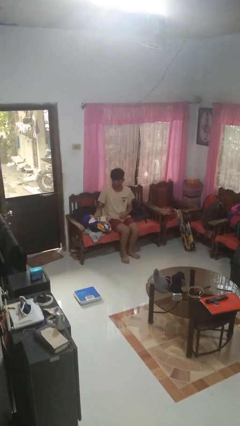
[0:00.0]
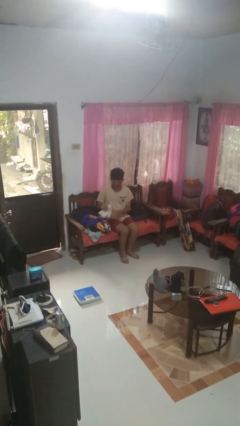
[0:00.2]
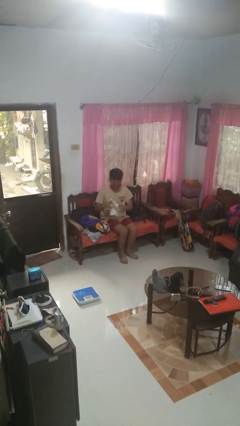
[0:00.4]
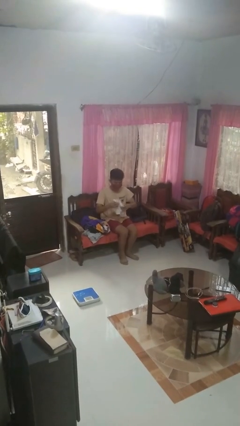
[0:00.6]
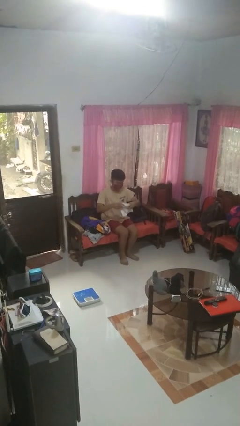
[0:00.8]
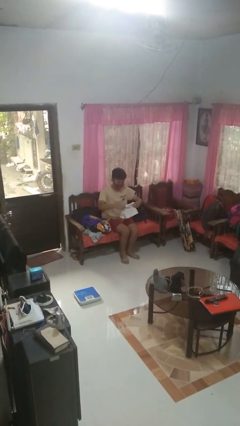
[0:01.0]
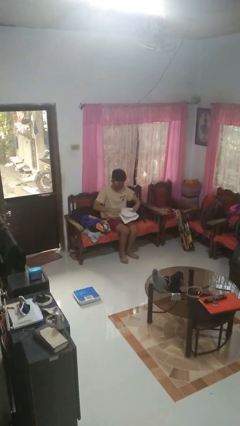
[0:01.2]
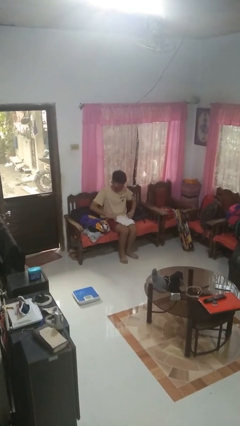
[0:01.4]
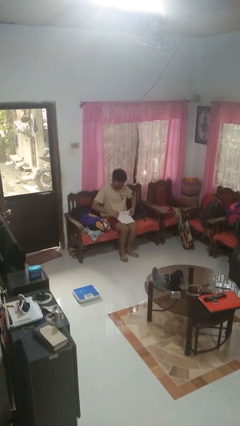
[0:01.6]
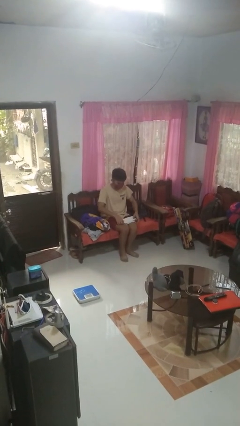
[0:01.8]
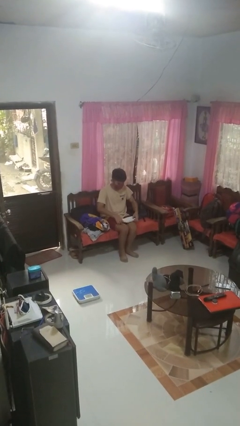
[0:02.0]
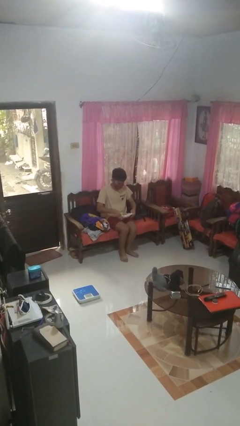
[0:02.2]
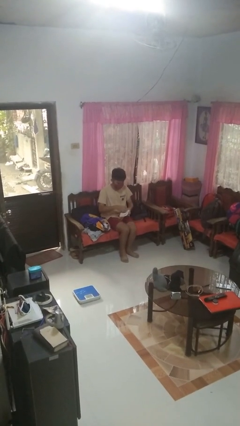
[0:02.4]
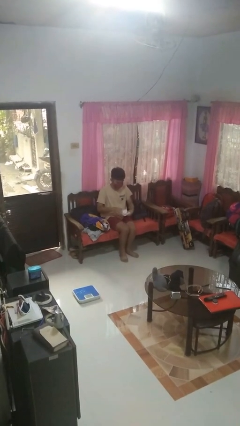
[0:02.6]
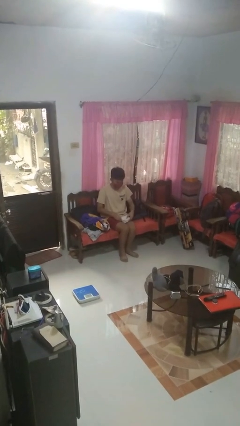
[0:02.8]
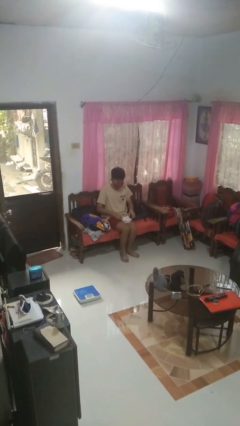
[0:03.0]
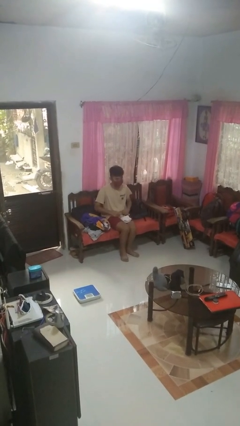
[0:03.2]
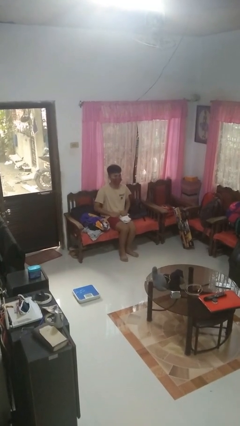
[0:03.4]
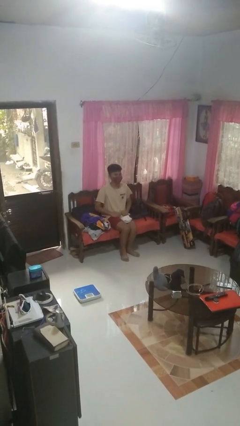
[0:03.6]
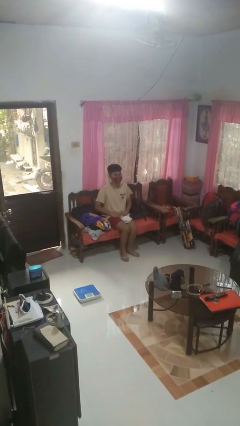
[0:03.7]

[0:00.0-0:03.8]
person folds towel

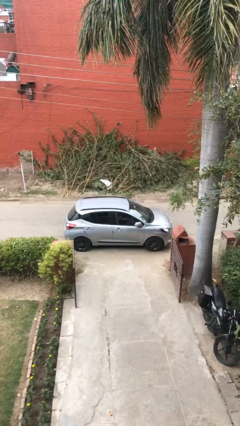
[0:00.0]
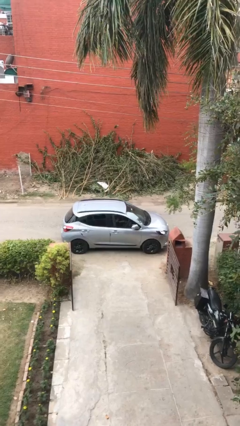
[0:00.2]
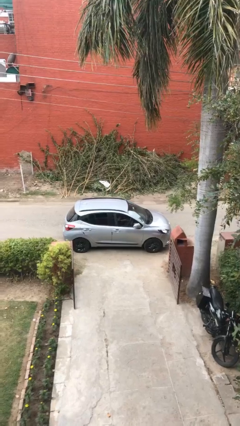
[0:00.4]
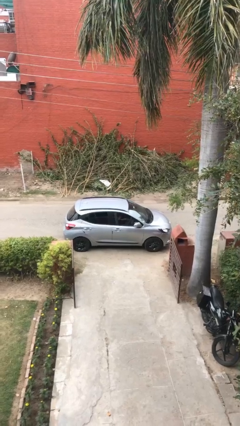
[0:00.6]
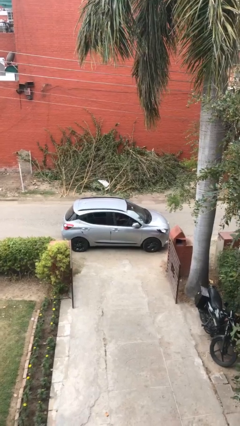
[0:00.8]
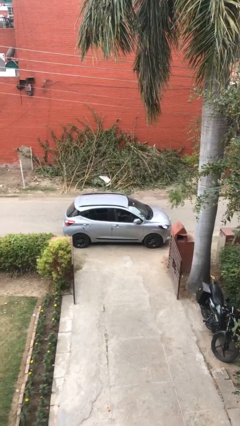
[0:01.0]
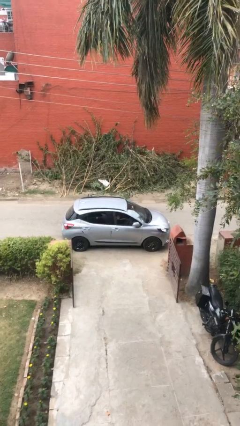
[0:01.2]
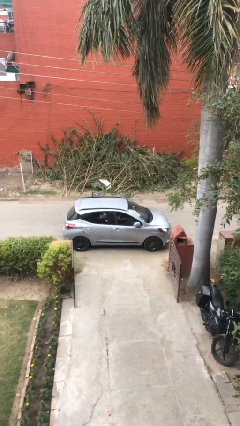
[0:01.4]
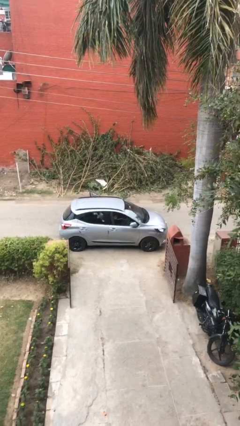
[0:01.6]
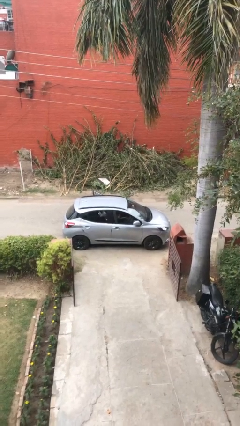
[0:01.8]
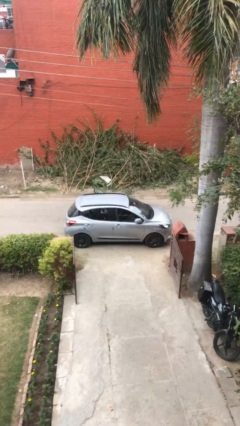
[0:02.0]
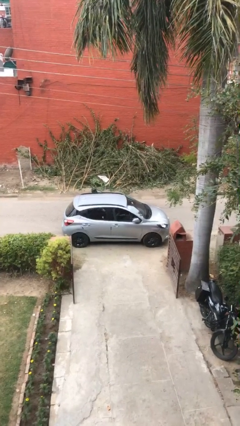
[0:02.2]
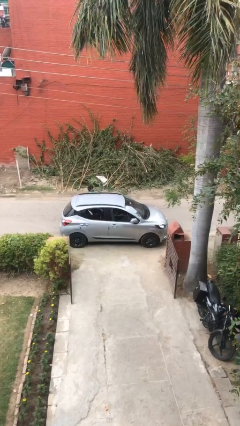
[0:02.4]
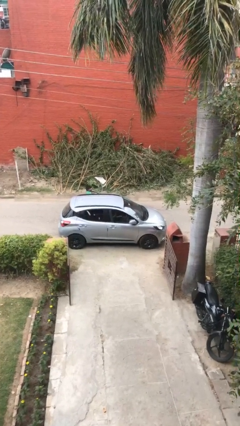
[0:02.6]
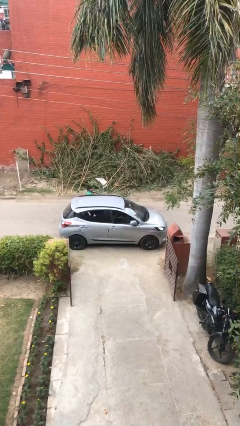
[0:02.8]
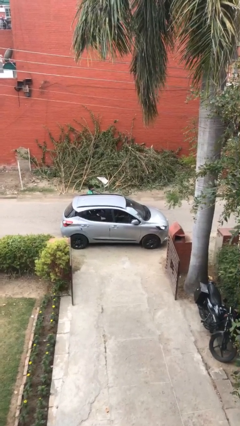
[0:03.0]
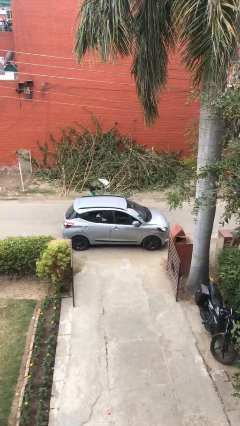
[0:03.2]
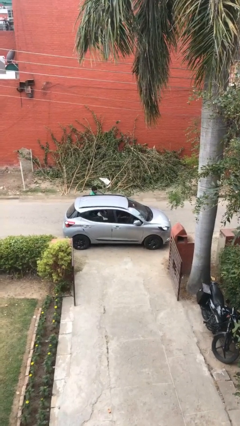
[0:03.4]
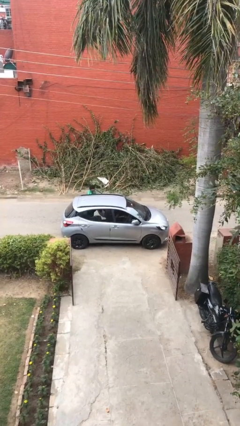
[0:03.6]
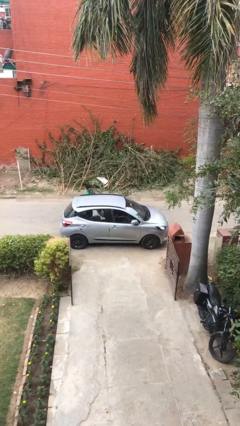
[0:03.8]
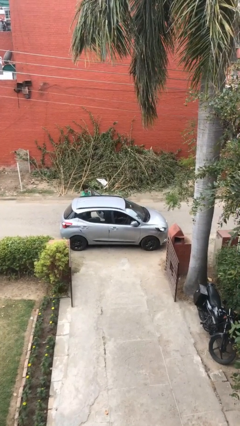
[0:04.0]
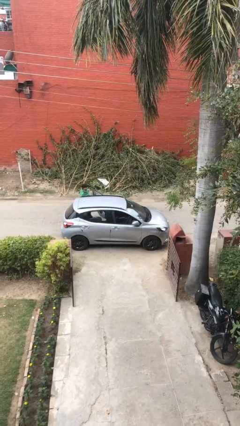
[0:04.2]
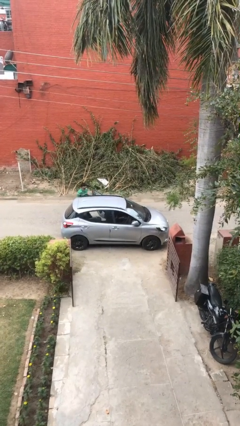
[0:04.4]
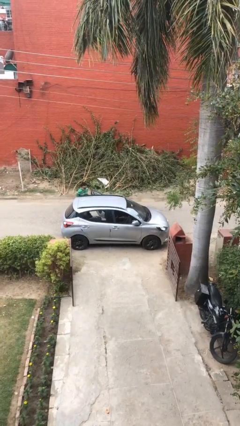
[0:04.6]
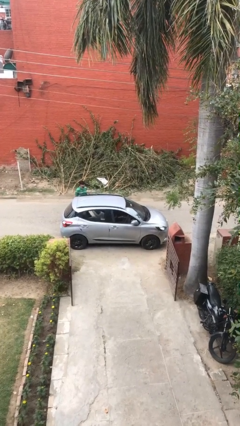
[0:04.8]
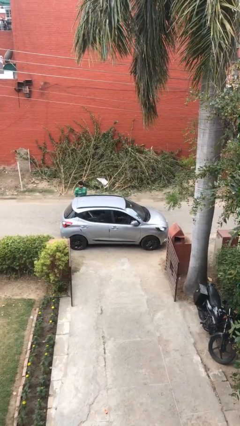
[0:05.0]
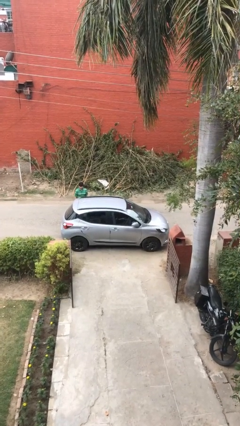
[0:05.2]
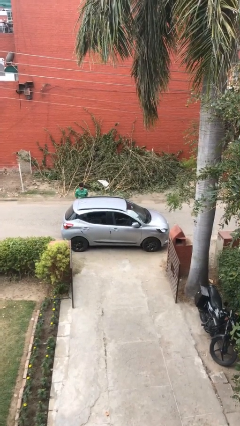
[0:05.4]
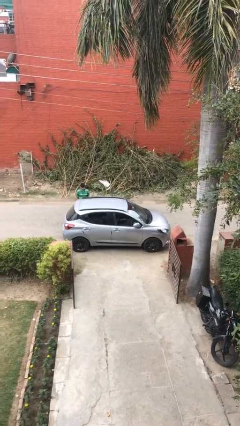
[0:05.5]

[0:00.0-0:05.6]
car drops off person

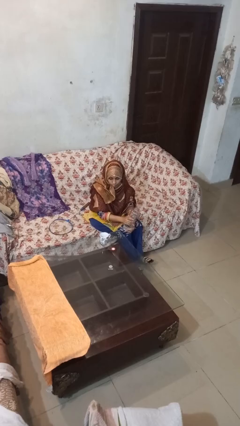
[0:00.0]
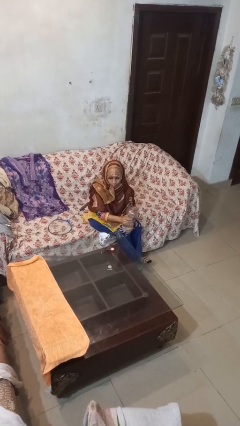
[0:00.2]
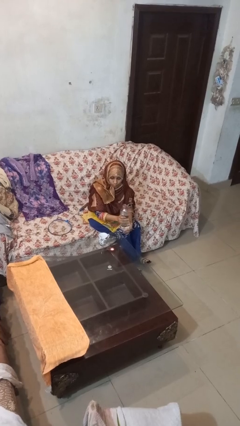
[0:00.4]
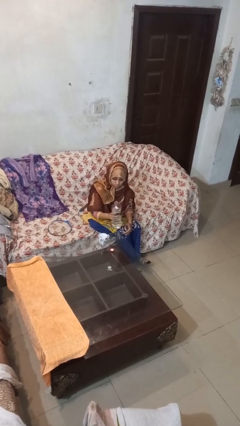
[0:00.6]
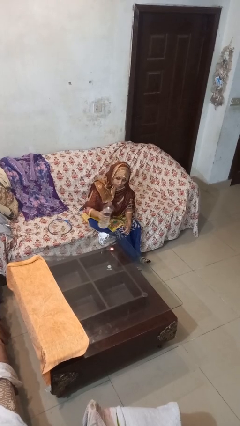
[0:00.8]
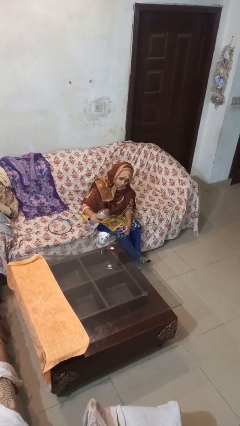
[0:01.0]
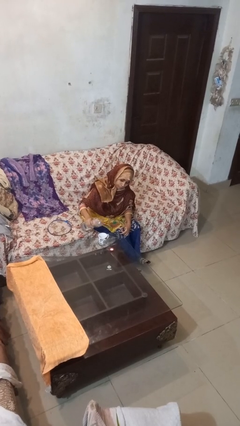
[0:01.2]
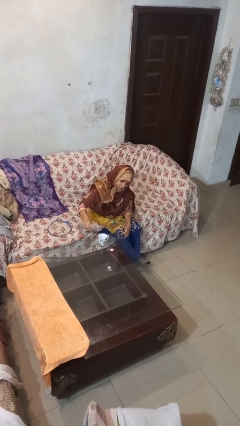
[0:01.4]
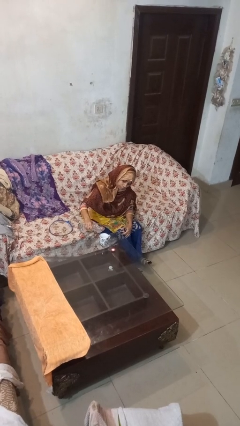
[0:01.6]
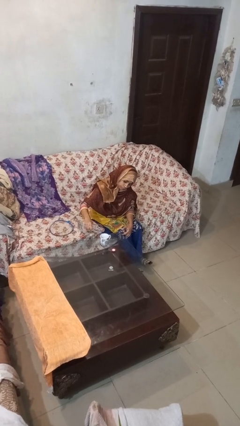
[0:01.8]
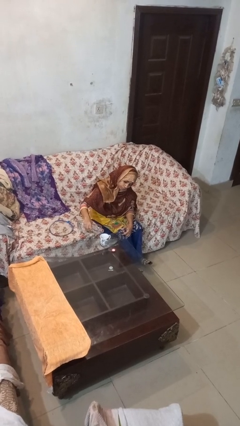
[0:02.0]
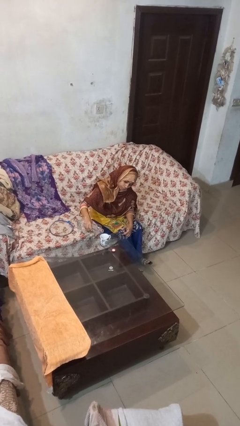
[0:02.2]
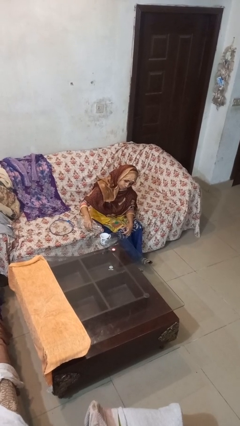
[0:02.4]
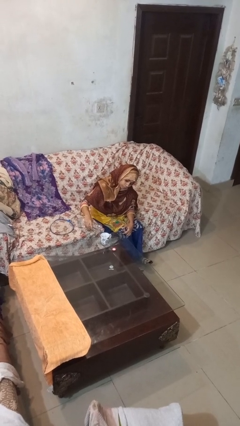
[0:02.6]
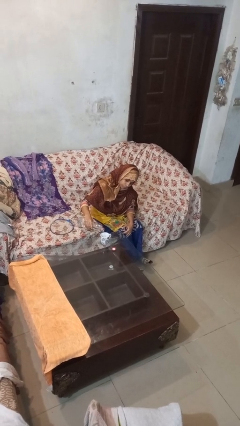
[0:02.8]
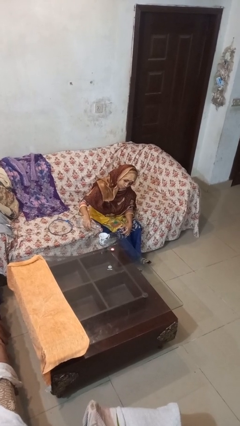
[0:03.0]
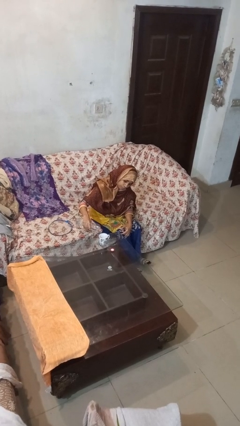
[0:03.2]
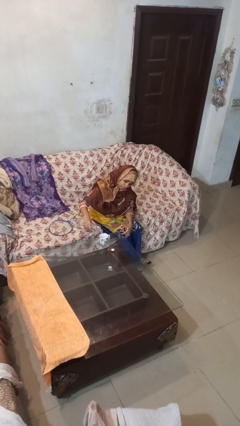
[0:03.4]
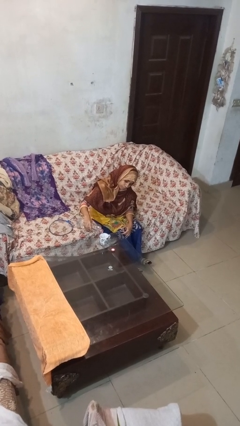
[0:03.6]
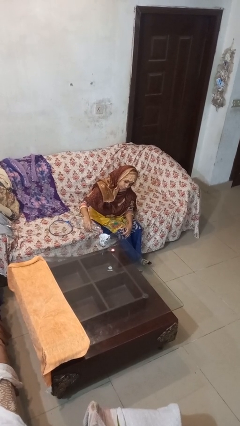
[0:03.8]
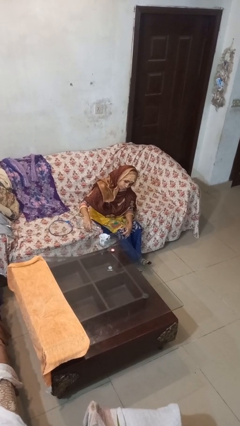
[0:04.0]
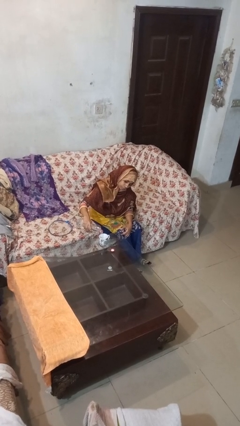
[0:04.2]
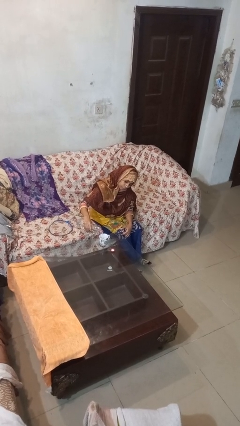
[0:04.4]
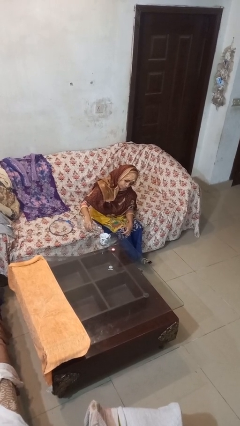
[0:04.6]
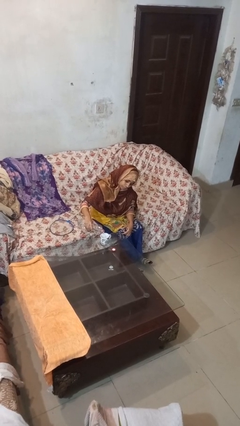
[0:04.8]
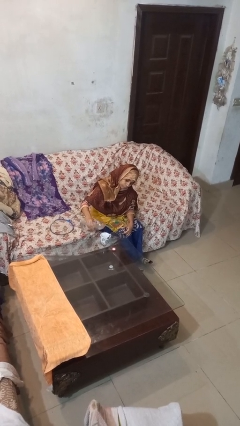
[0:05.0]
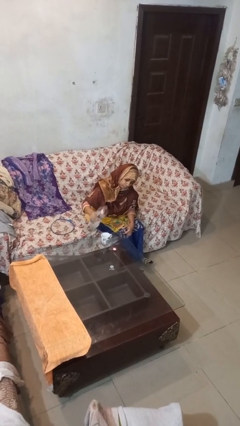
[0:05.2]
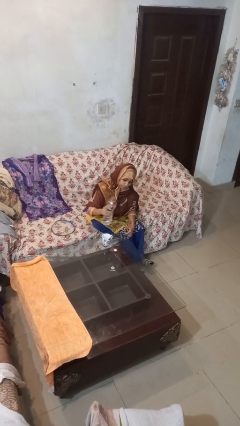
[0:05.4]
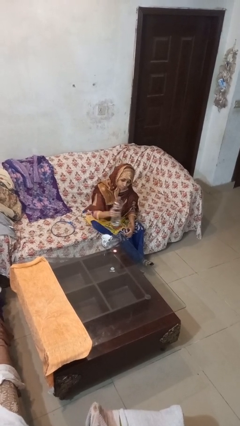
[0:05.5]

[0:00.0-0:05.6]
person pours liquid into cup

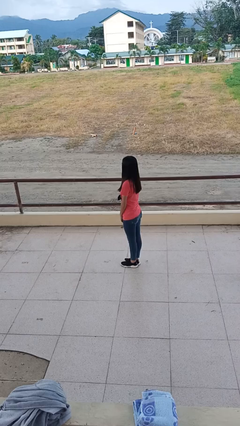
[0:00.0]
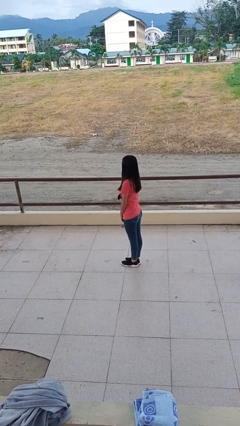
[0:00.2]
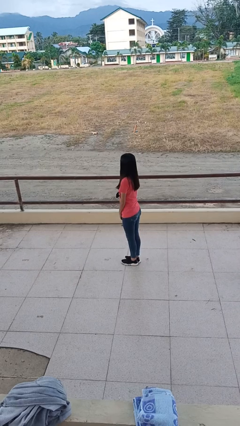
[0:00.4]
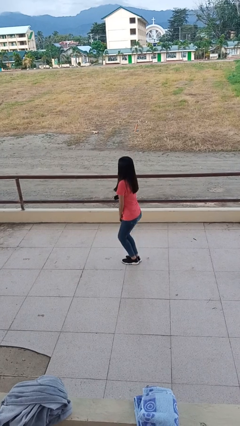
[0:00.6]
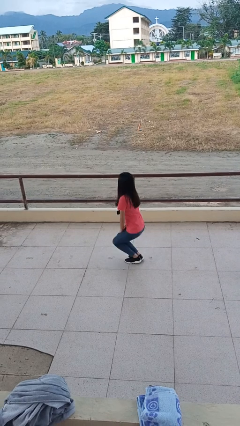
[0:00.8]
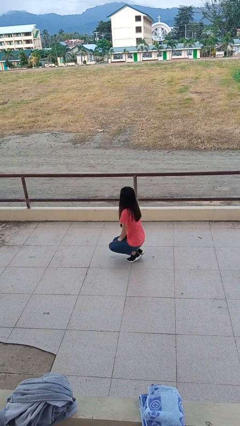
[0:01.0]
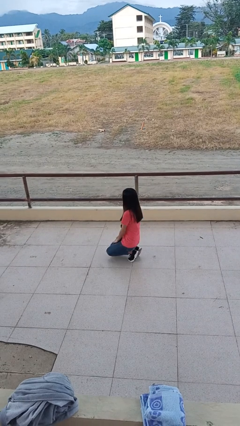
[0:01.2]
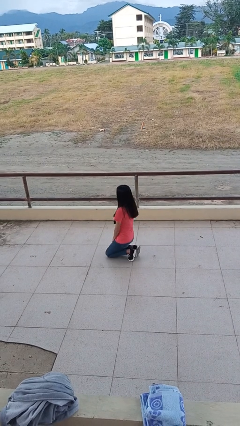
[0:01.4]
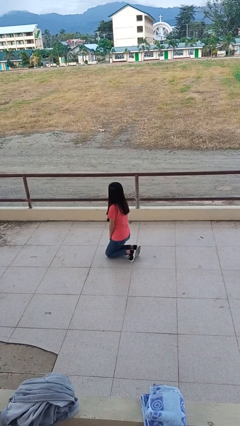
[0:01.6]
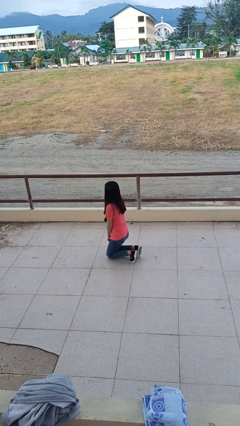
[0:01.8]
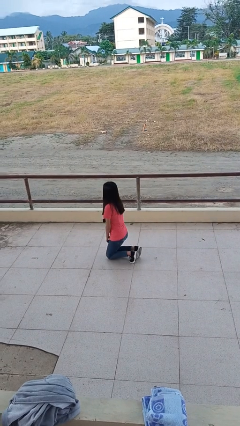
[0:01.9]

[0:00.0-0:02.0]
person kneels

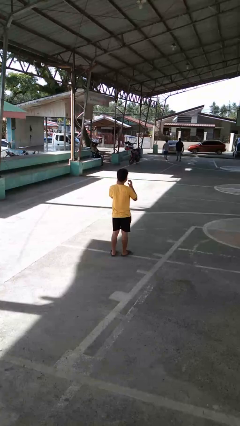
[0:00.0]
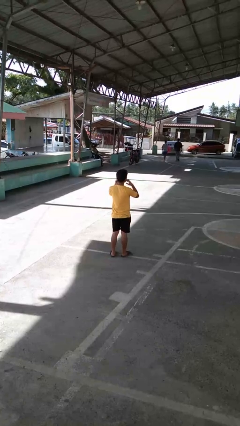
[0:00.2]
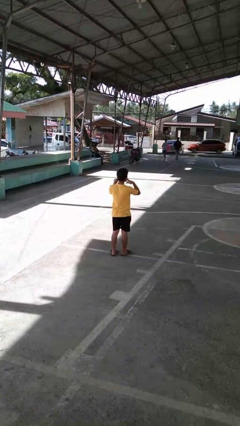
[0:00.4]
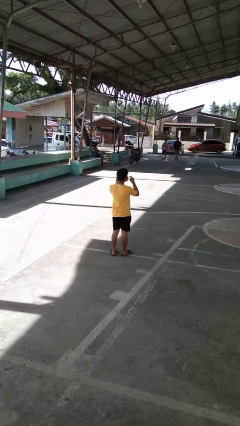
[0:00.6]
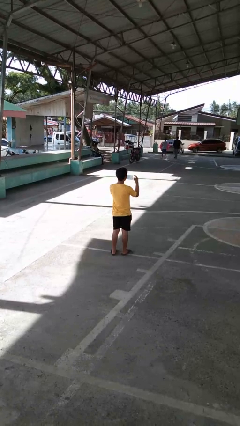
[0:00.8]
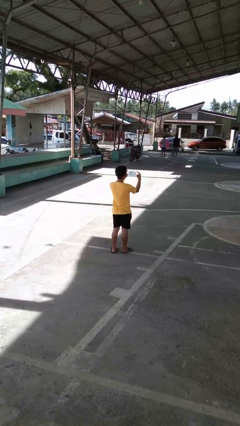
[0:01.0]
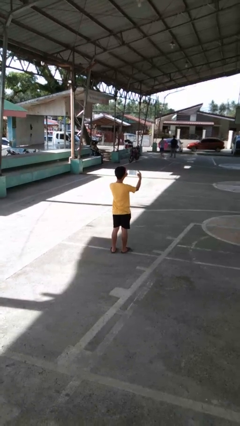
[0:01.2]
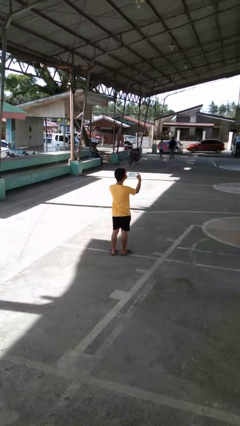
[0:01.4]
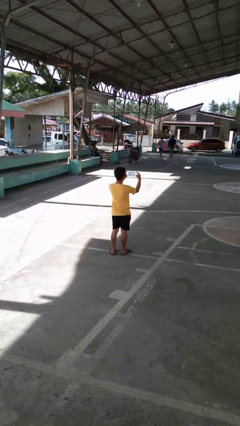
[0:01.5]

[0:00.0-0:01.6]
person takes off facemask
